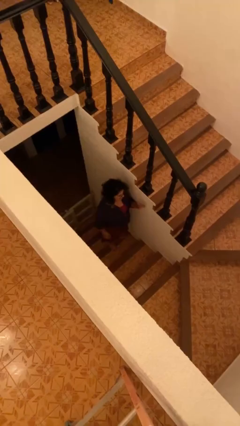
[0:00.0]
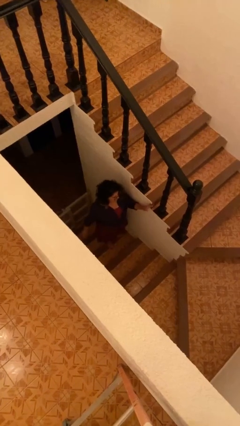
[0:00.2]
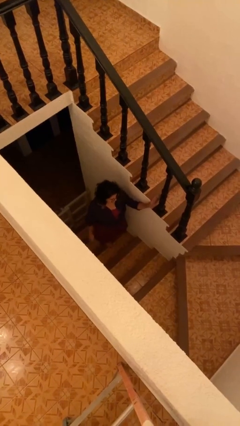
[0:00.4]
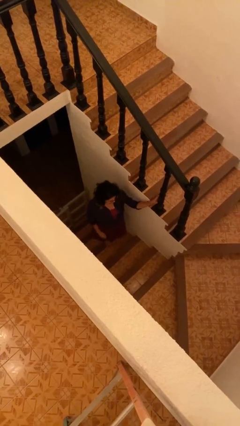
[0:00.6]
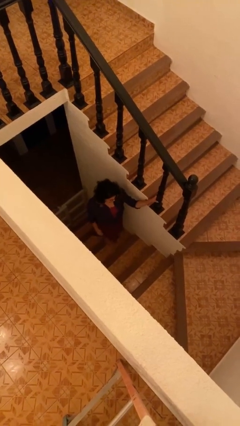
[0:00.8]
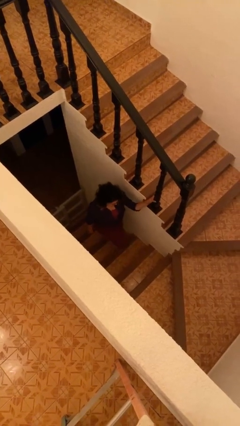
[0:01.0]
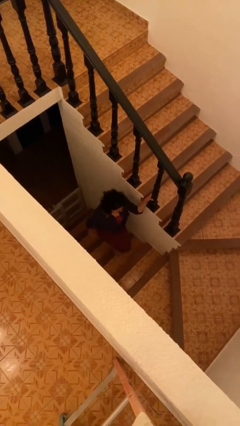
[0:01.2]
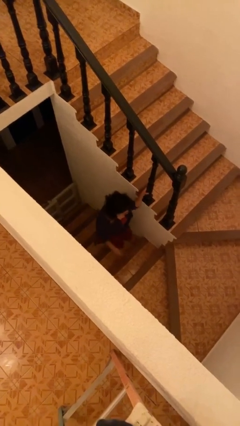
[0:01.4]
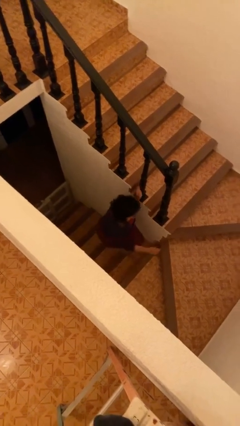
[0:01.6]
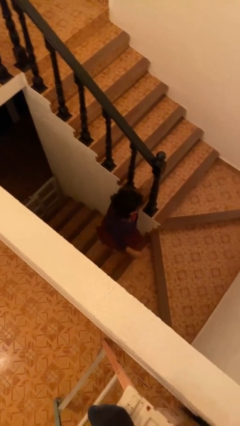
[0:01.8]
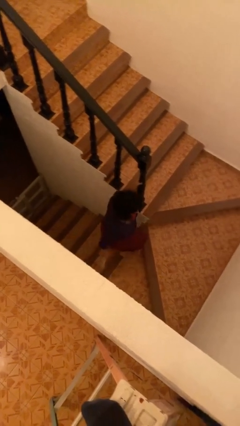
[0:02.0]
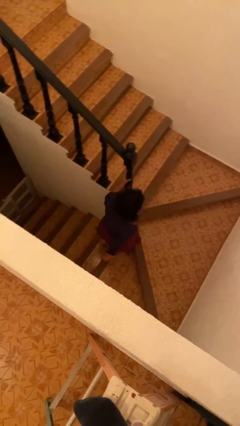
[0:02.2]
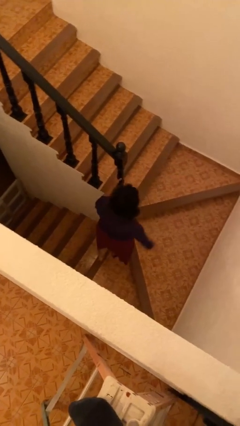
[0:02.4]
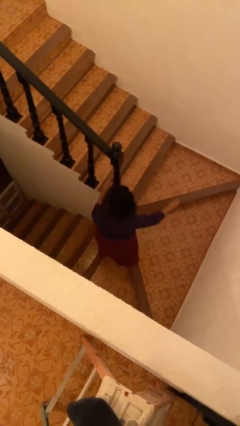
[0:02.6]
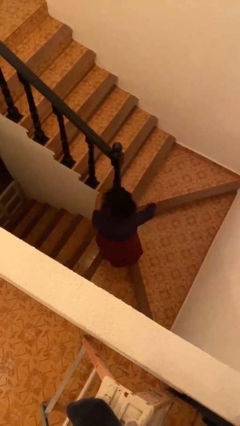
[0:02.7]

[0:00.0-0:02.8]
person climbs up stairs

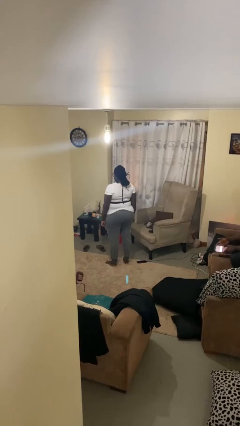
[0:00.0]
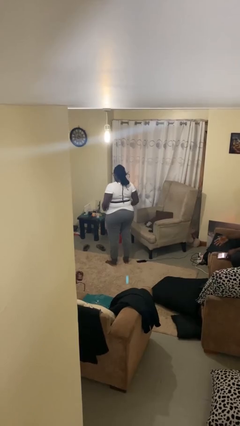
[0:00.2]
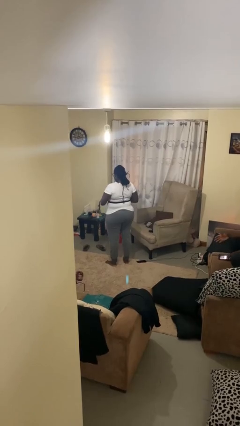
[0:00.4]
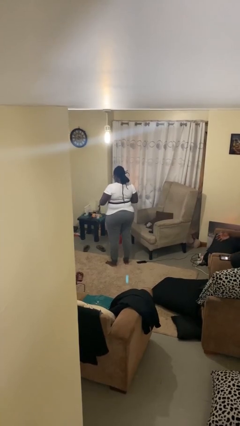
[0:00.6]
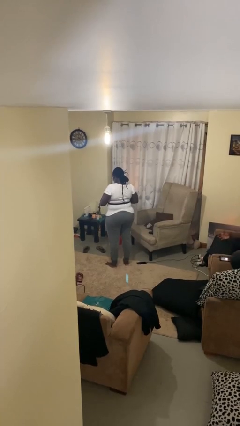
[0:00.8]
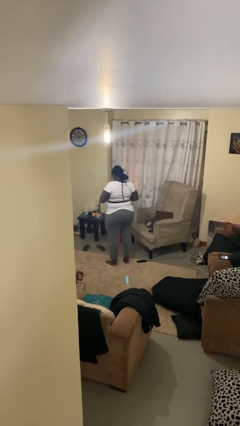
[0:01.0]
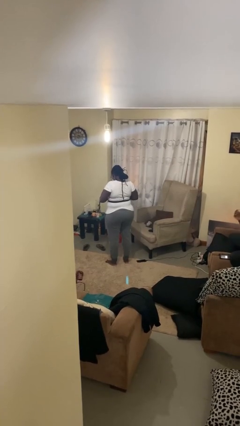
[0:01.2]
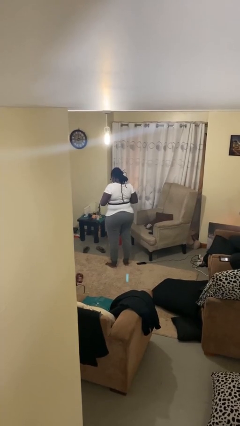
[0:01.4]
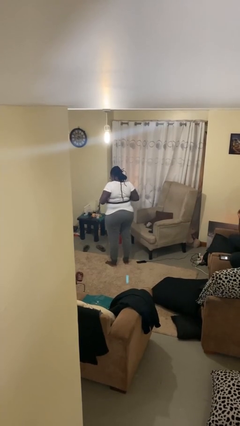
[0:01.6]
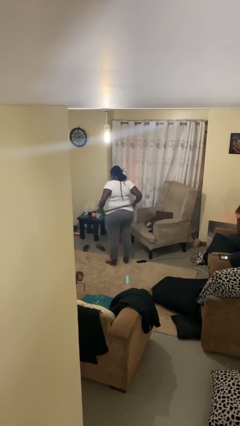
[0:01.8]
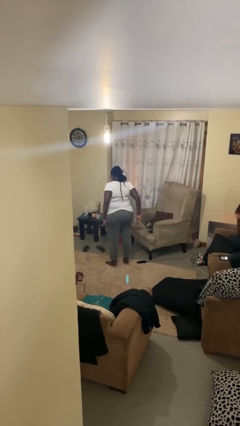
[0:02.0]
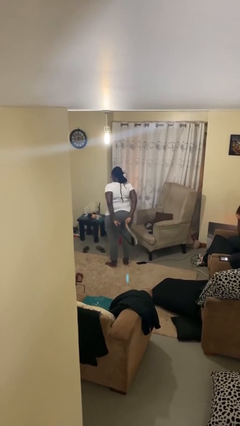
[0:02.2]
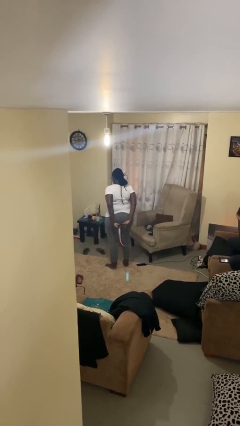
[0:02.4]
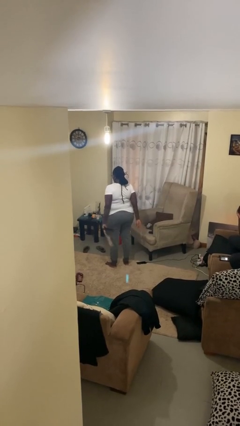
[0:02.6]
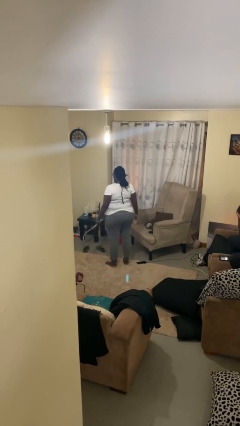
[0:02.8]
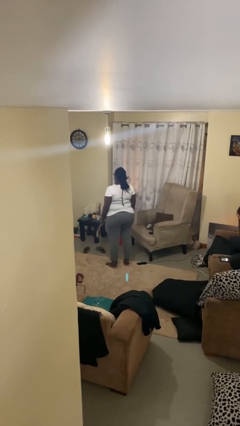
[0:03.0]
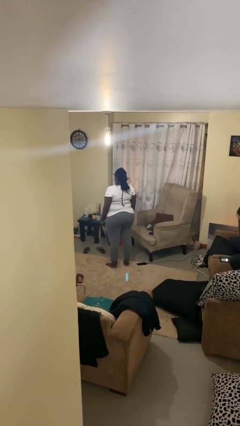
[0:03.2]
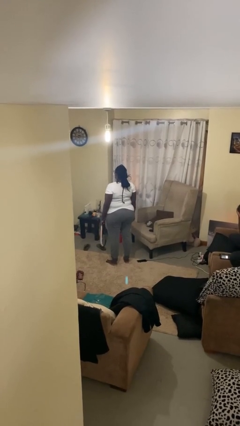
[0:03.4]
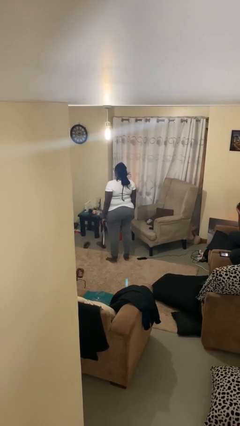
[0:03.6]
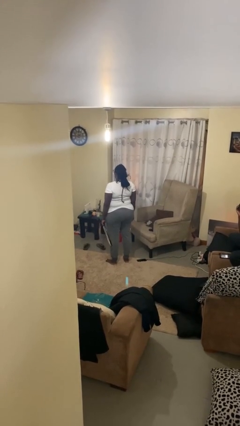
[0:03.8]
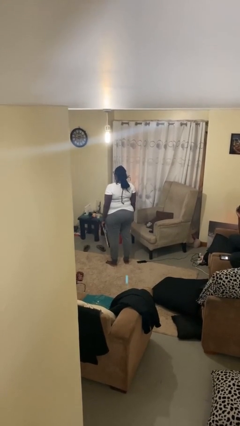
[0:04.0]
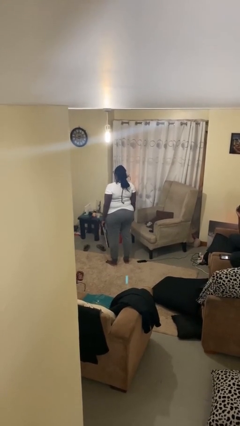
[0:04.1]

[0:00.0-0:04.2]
person takes off belt

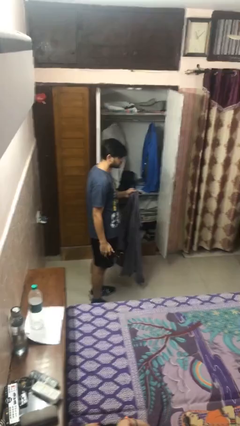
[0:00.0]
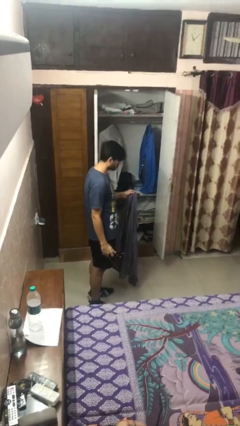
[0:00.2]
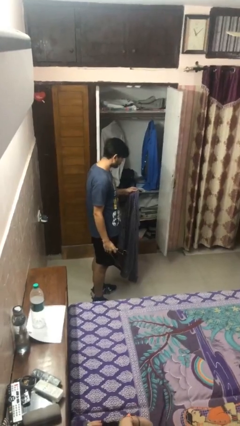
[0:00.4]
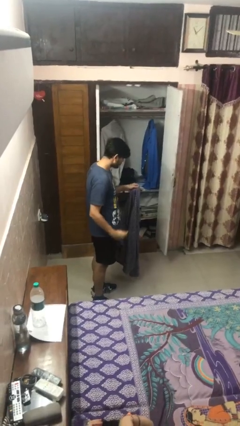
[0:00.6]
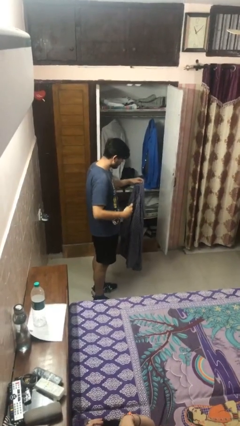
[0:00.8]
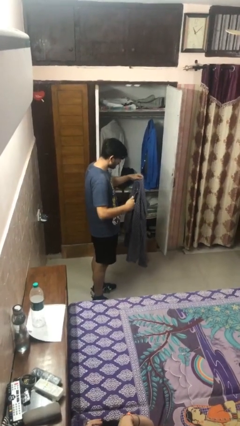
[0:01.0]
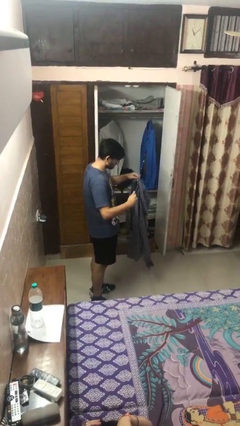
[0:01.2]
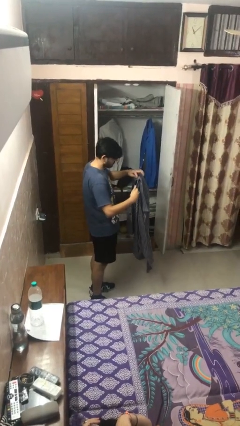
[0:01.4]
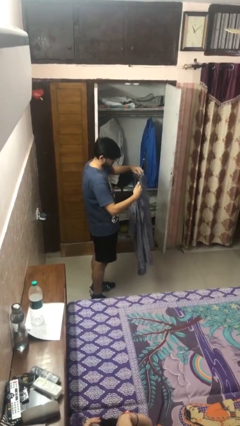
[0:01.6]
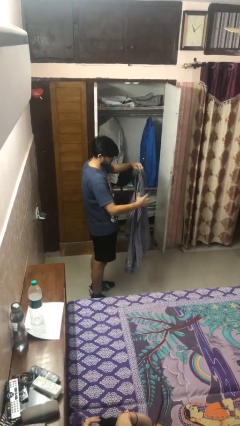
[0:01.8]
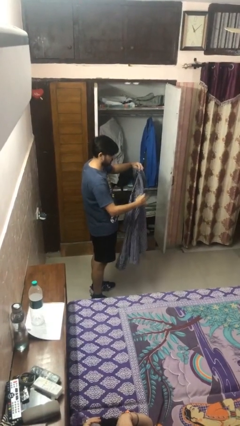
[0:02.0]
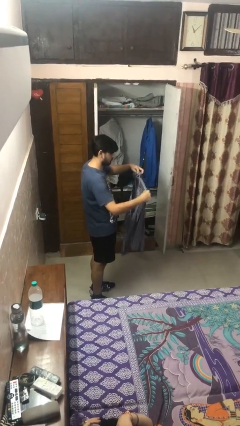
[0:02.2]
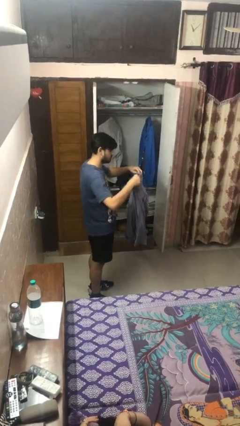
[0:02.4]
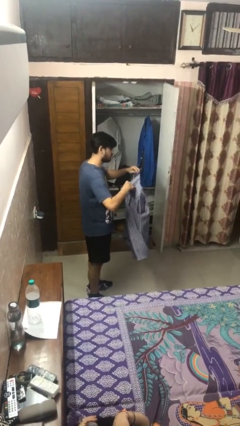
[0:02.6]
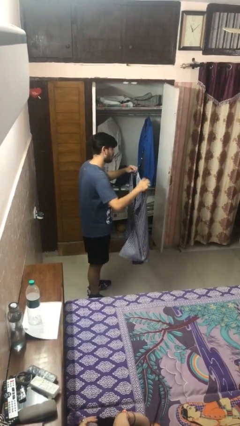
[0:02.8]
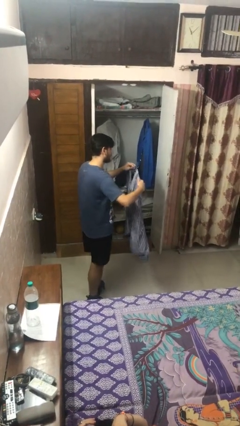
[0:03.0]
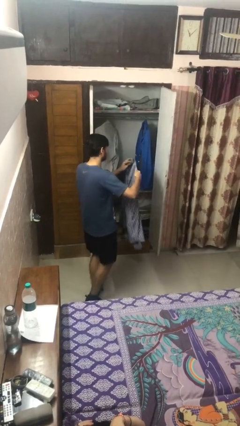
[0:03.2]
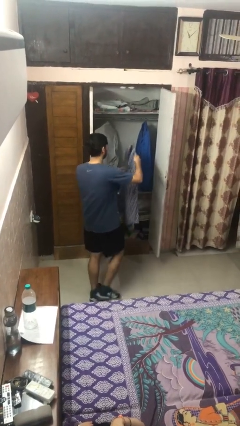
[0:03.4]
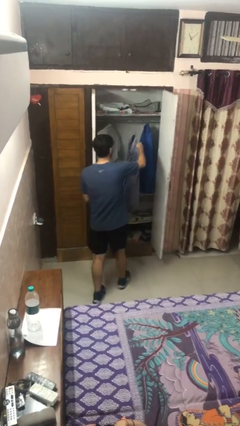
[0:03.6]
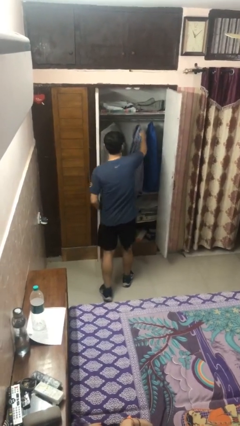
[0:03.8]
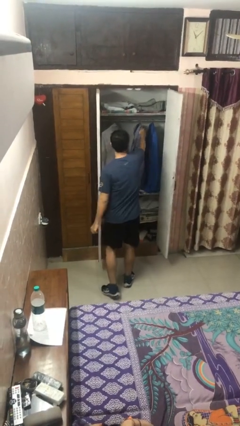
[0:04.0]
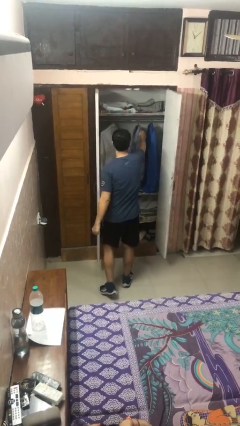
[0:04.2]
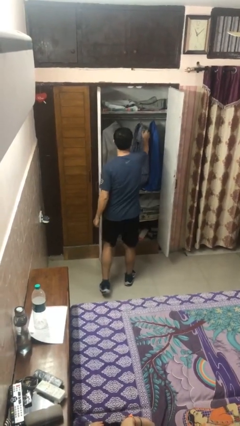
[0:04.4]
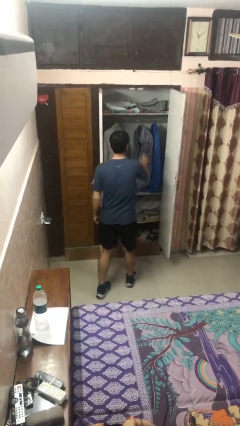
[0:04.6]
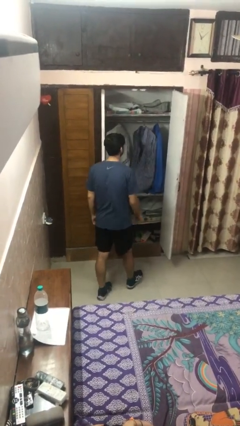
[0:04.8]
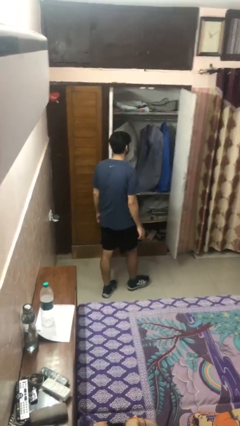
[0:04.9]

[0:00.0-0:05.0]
person puts clothes into closet

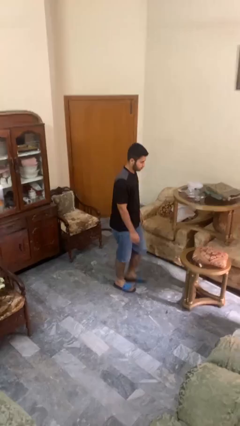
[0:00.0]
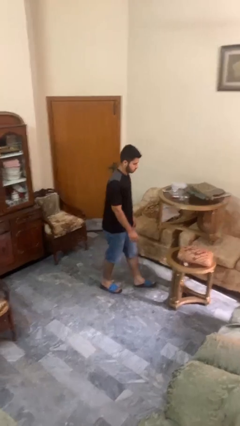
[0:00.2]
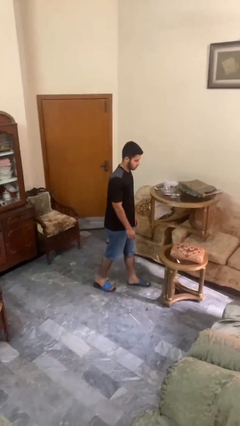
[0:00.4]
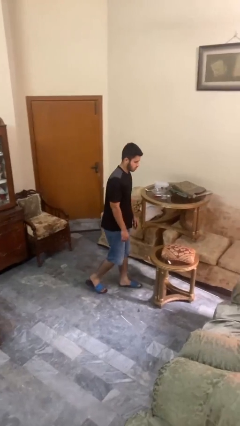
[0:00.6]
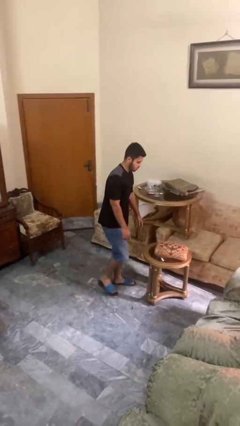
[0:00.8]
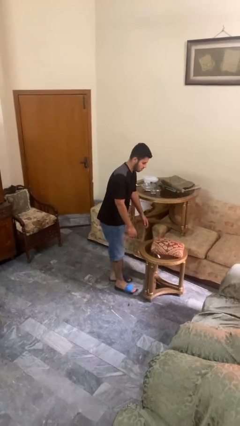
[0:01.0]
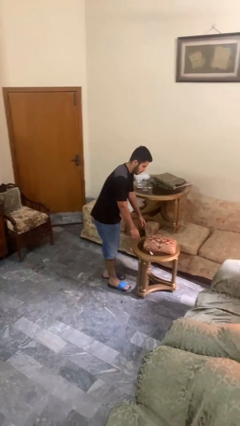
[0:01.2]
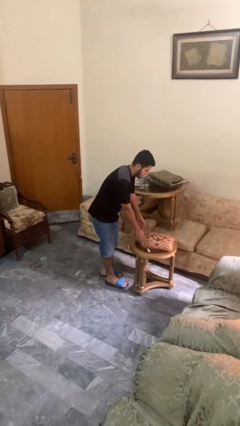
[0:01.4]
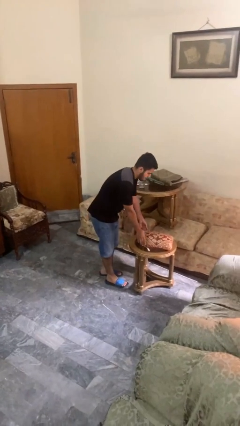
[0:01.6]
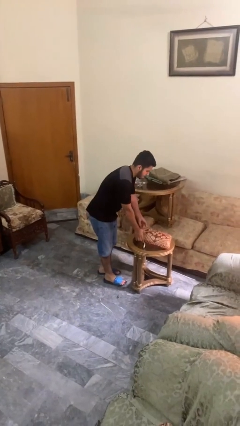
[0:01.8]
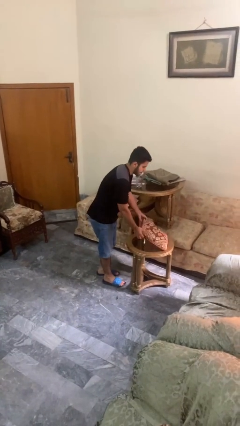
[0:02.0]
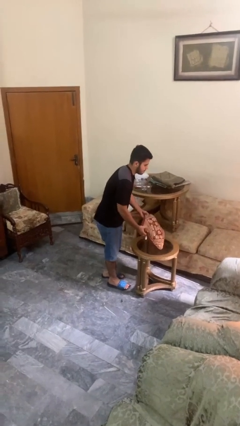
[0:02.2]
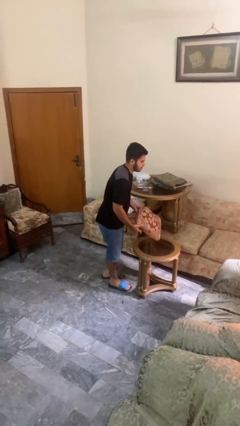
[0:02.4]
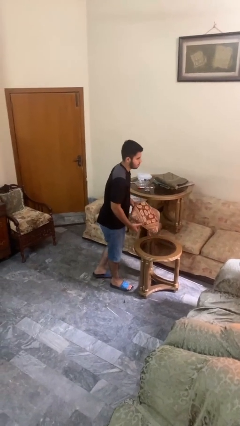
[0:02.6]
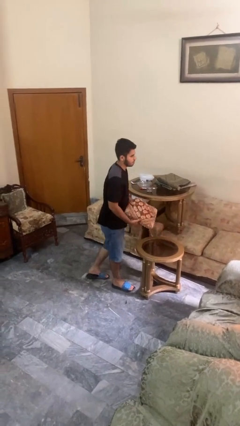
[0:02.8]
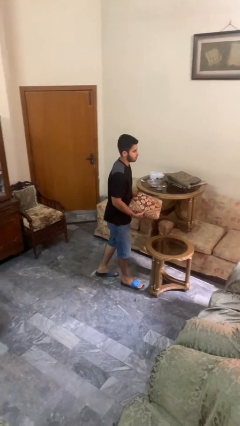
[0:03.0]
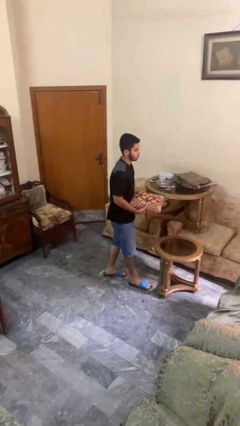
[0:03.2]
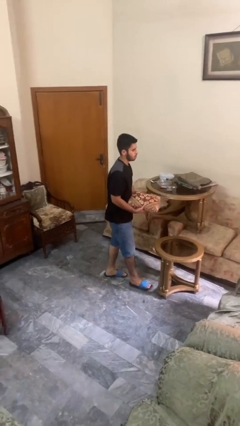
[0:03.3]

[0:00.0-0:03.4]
person picks up object from table

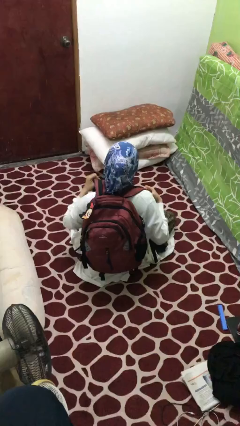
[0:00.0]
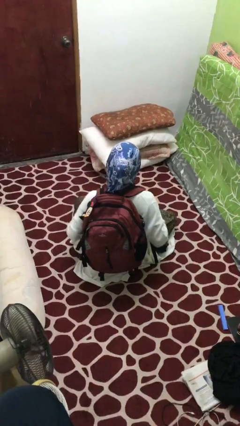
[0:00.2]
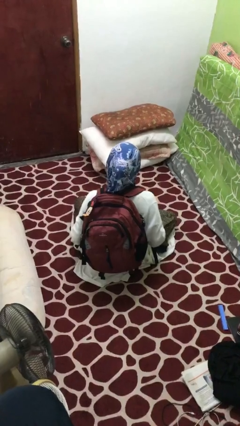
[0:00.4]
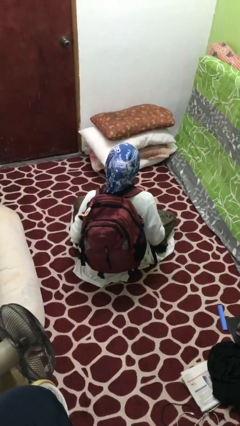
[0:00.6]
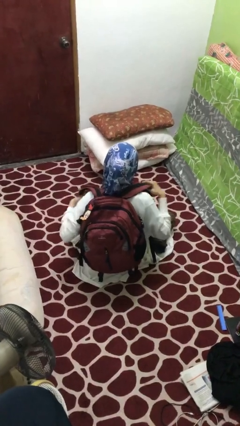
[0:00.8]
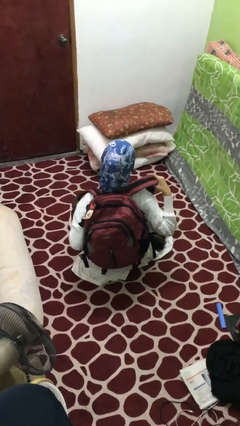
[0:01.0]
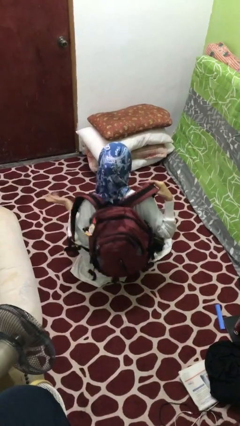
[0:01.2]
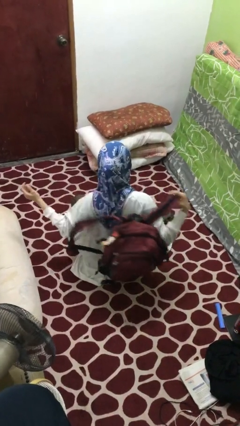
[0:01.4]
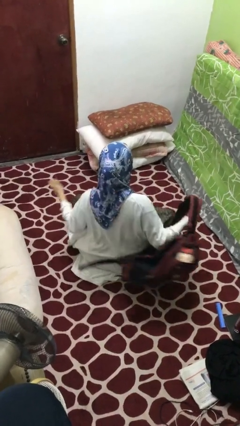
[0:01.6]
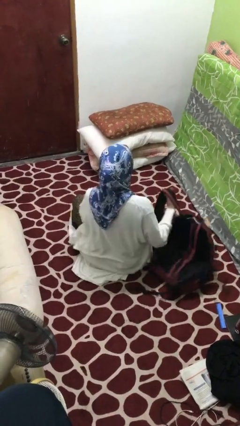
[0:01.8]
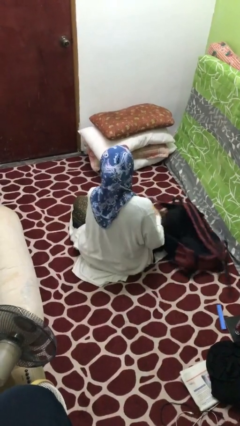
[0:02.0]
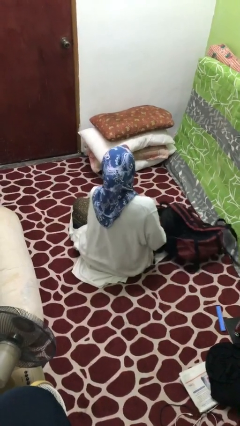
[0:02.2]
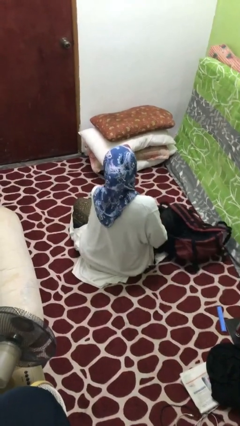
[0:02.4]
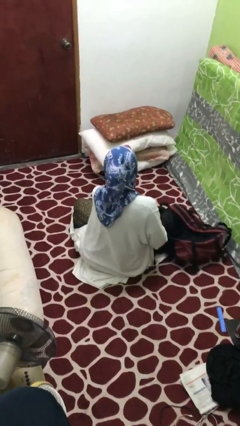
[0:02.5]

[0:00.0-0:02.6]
person takes off backpack
